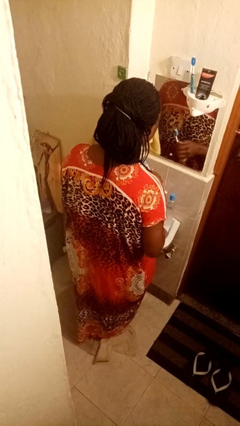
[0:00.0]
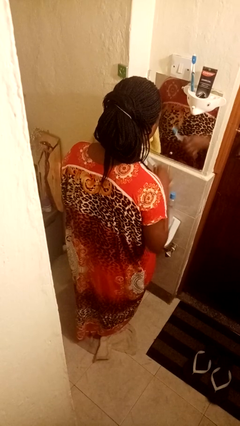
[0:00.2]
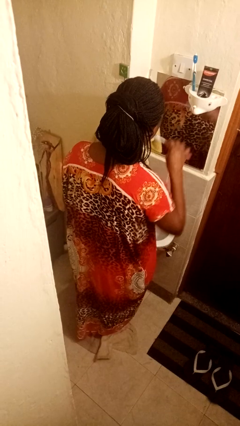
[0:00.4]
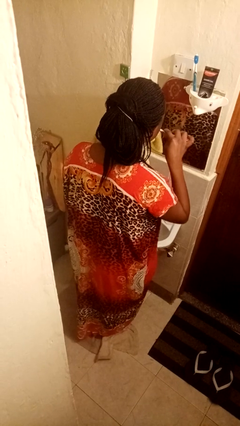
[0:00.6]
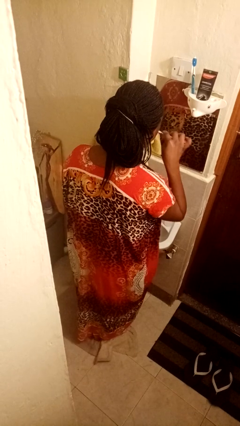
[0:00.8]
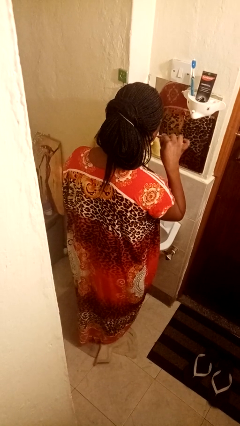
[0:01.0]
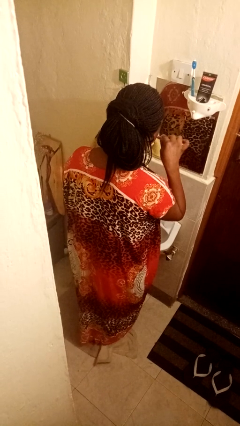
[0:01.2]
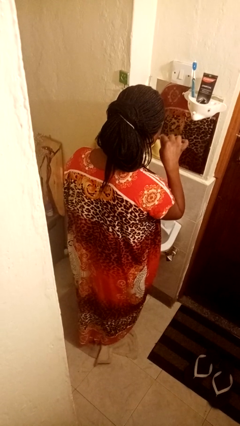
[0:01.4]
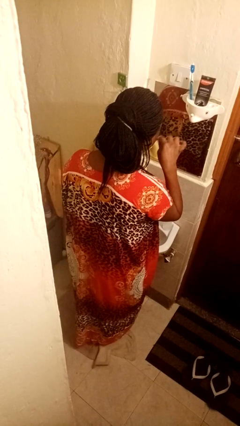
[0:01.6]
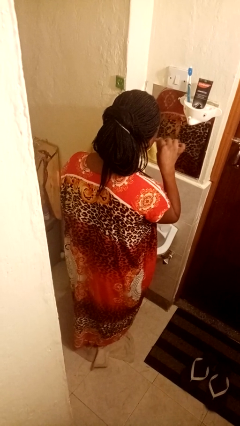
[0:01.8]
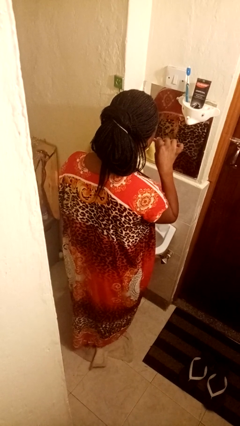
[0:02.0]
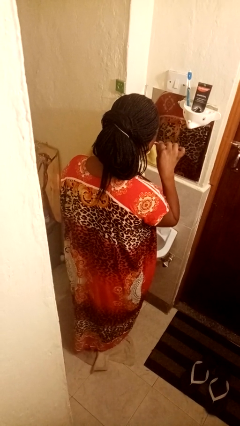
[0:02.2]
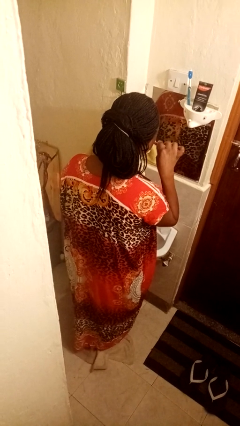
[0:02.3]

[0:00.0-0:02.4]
person brushes teeth

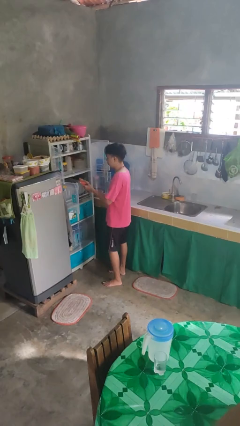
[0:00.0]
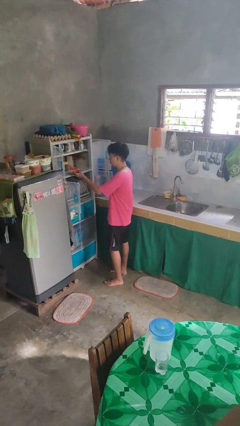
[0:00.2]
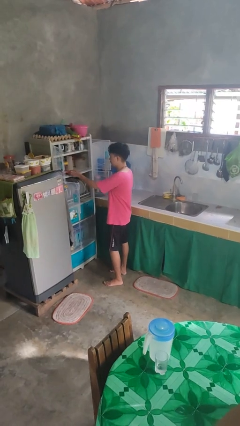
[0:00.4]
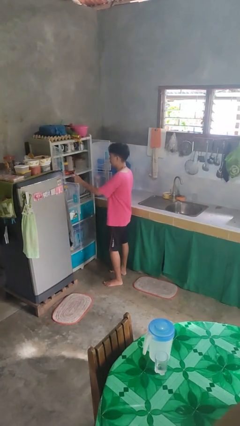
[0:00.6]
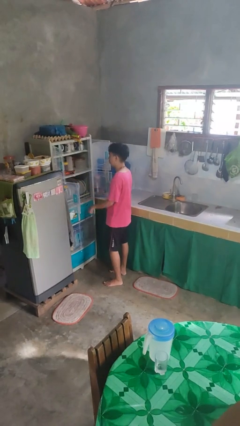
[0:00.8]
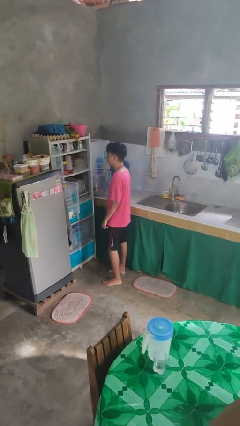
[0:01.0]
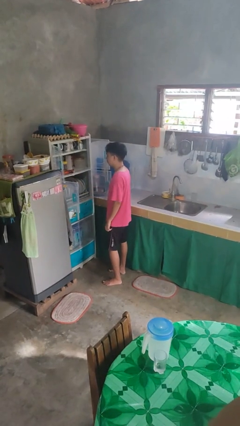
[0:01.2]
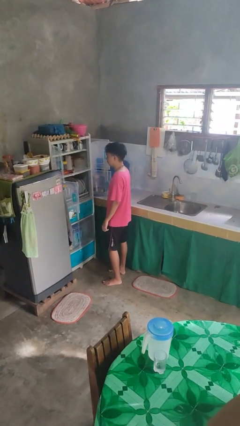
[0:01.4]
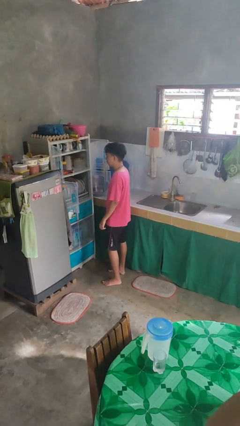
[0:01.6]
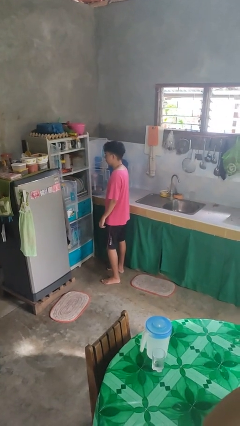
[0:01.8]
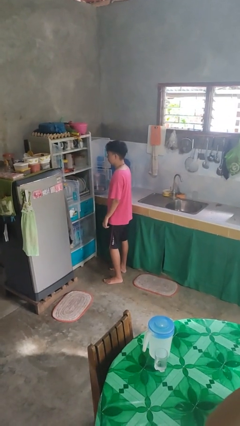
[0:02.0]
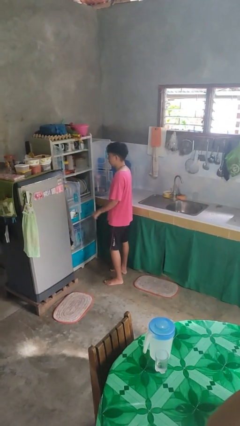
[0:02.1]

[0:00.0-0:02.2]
person puts object in cabinet

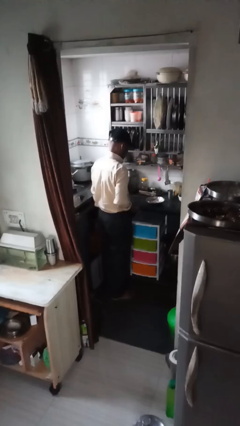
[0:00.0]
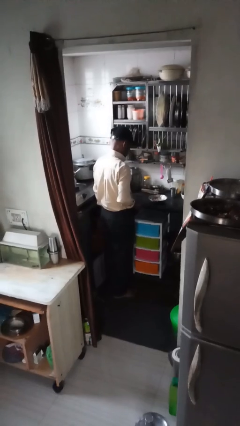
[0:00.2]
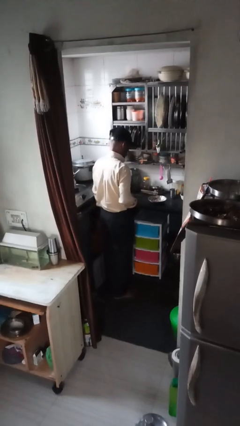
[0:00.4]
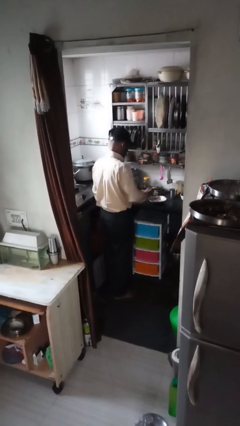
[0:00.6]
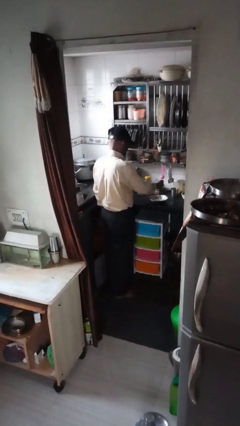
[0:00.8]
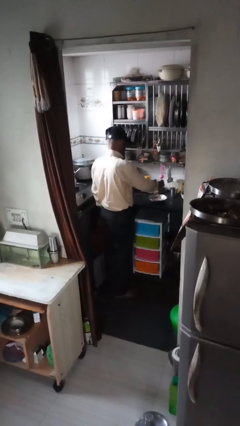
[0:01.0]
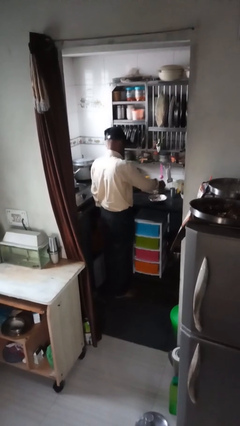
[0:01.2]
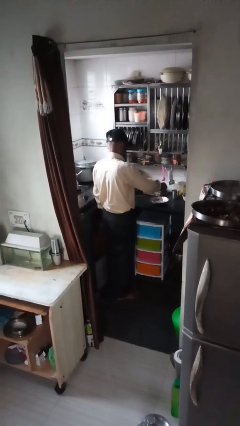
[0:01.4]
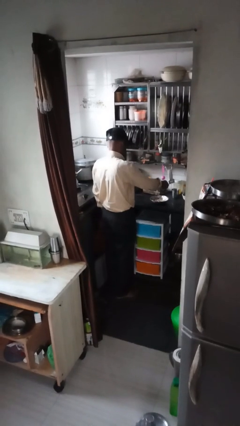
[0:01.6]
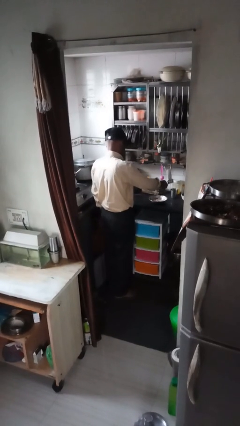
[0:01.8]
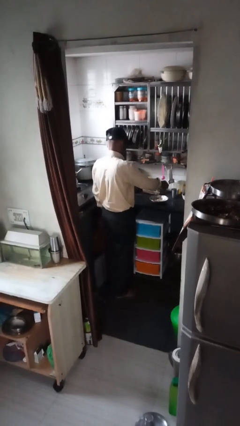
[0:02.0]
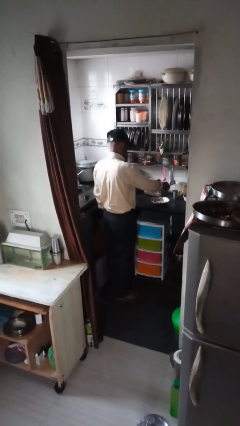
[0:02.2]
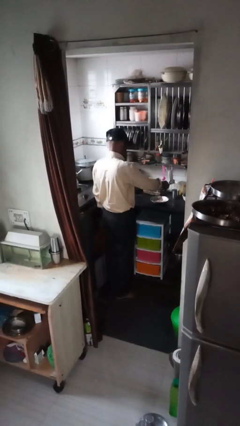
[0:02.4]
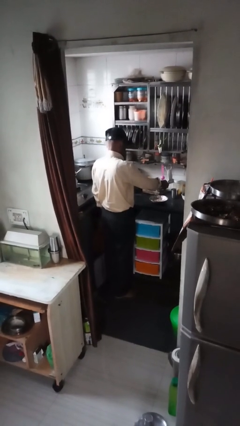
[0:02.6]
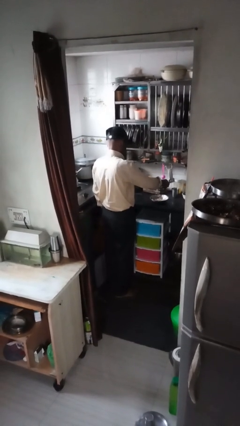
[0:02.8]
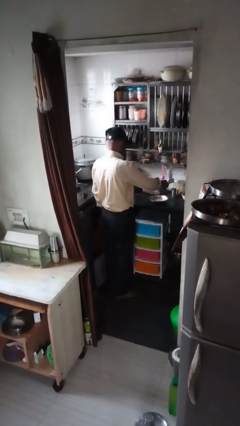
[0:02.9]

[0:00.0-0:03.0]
person pours into bowl

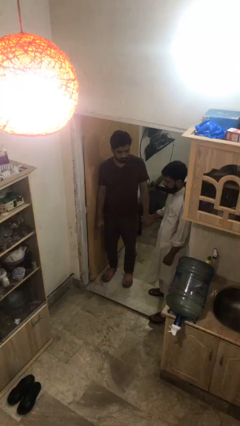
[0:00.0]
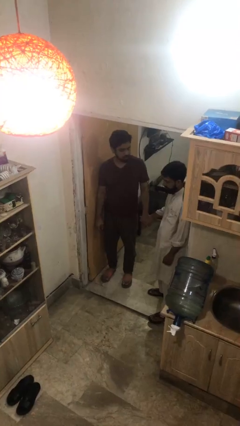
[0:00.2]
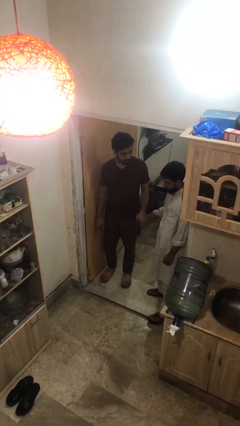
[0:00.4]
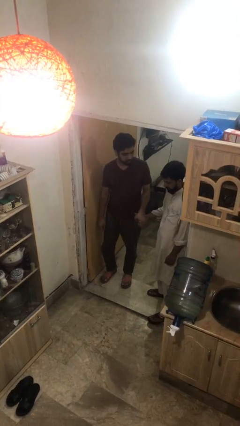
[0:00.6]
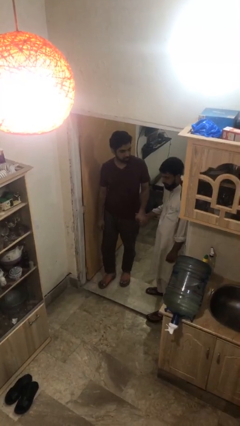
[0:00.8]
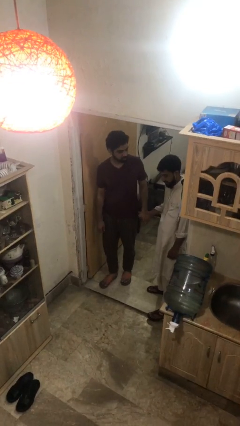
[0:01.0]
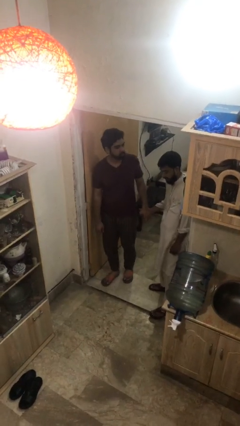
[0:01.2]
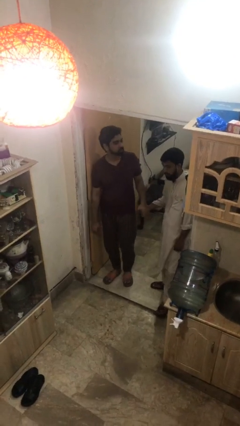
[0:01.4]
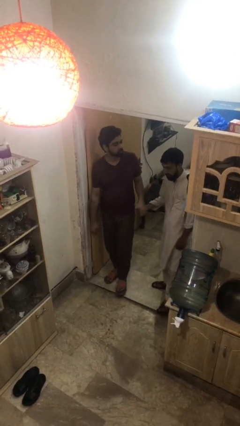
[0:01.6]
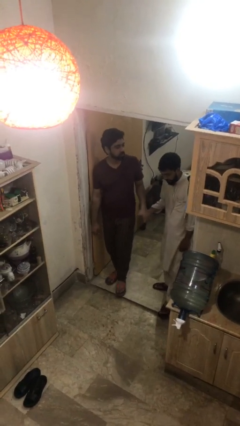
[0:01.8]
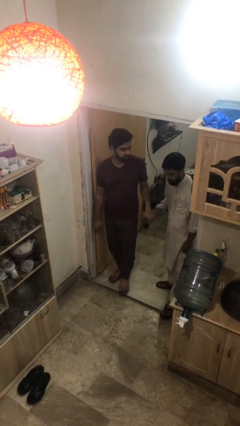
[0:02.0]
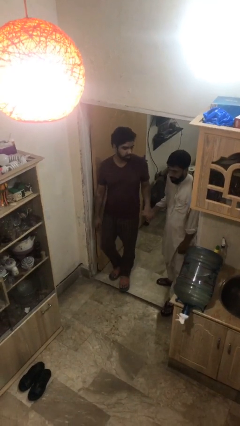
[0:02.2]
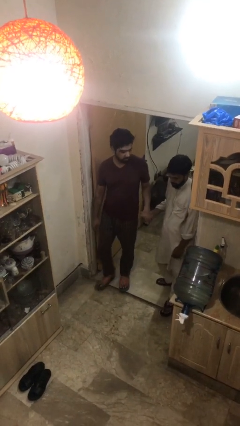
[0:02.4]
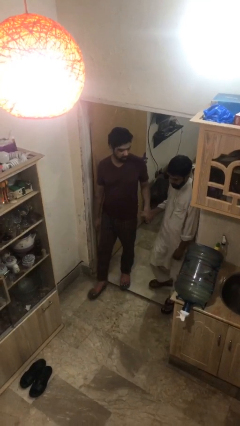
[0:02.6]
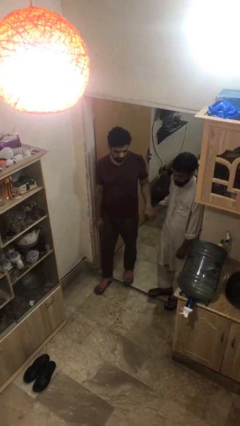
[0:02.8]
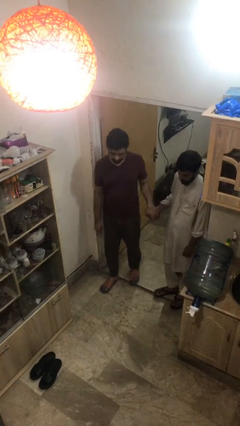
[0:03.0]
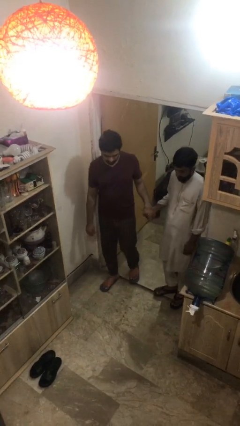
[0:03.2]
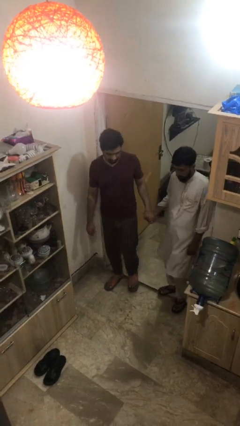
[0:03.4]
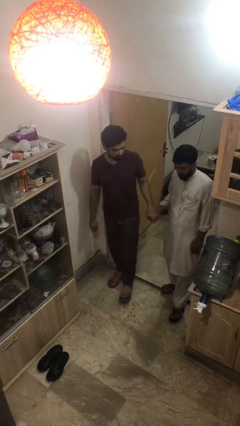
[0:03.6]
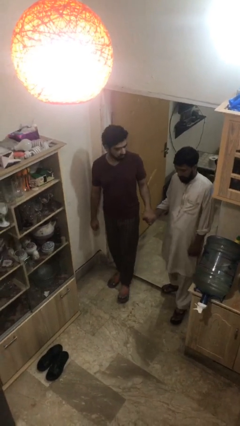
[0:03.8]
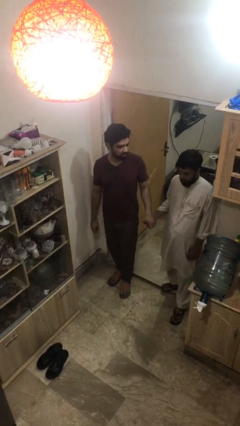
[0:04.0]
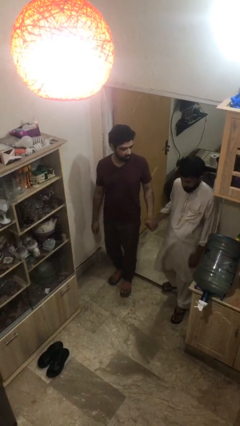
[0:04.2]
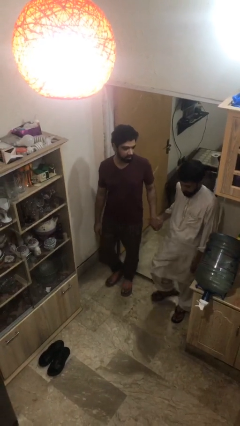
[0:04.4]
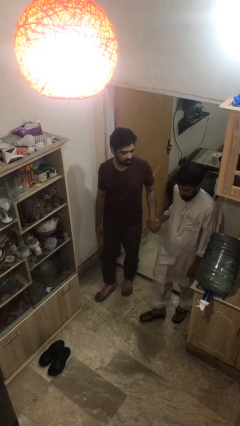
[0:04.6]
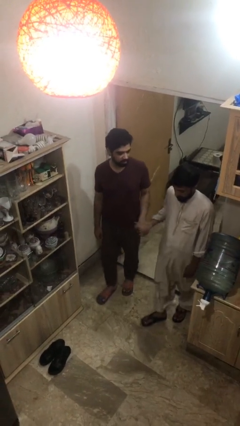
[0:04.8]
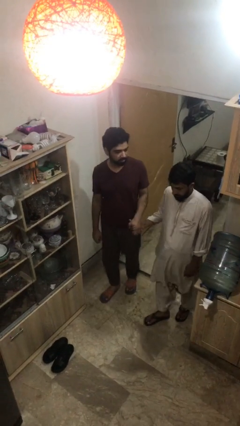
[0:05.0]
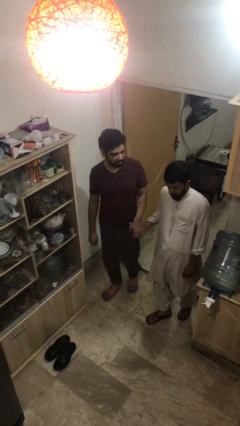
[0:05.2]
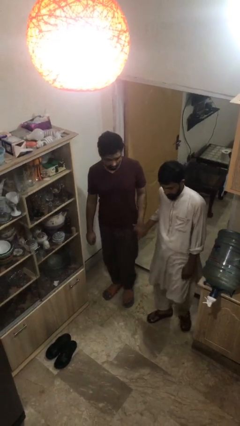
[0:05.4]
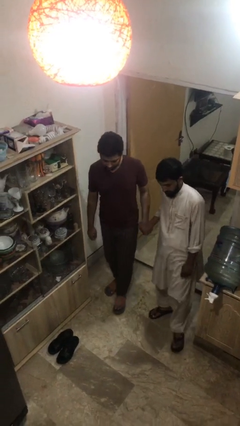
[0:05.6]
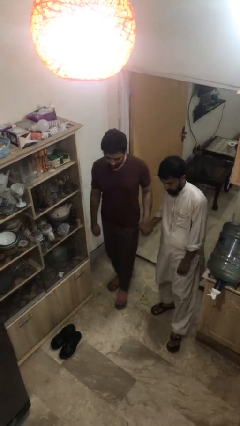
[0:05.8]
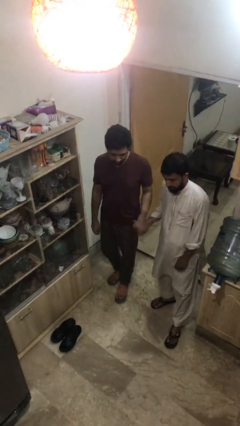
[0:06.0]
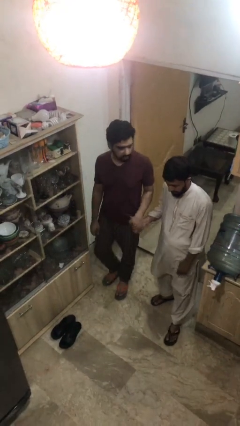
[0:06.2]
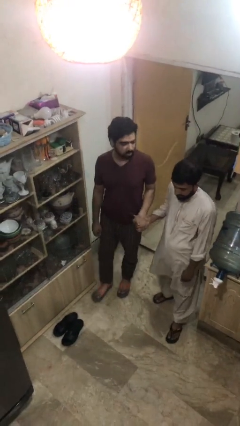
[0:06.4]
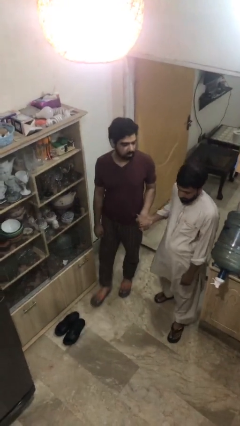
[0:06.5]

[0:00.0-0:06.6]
person holds hand

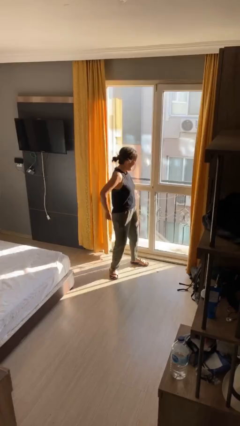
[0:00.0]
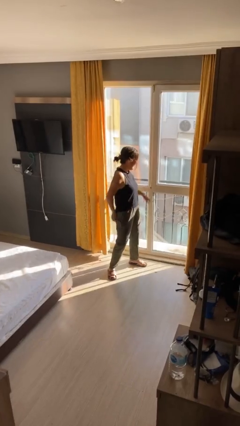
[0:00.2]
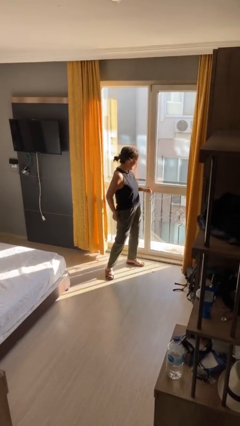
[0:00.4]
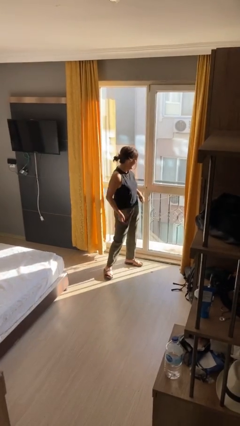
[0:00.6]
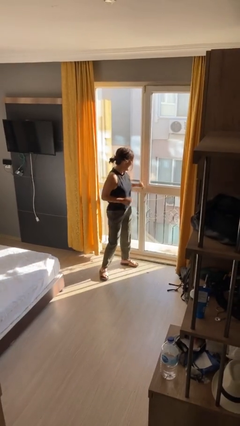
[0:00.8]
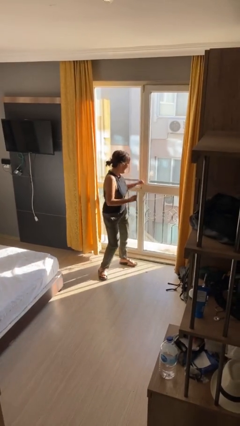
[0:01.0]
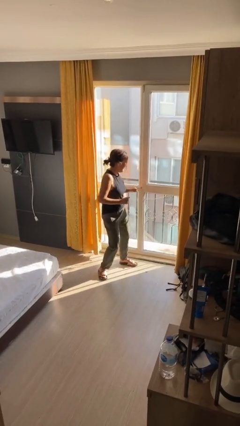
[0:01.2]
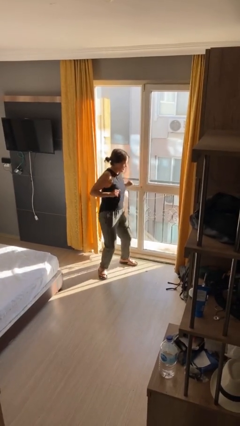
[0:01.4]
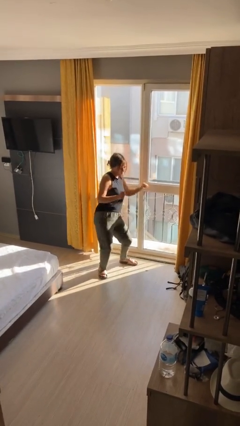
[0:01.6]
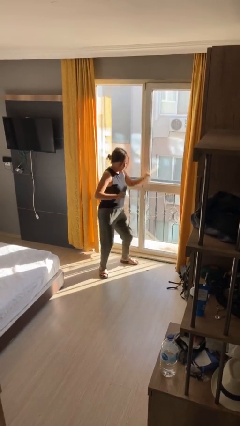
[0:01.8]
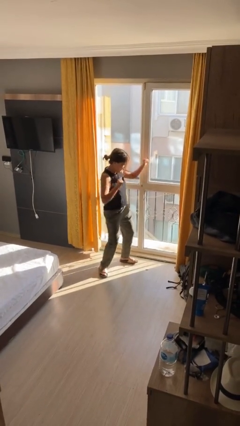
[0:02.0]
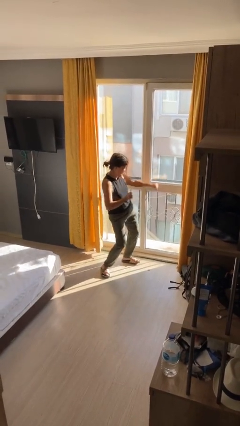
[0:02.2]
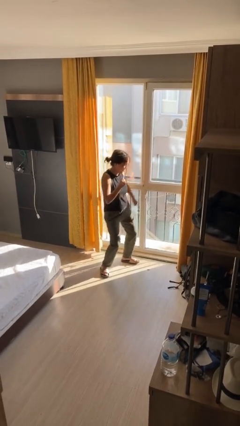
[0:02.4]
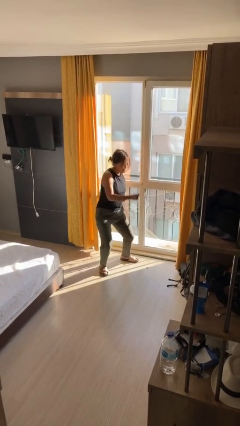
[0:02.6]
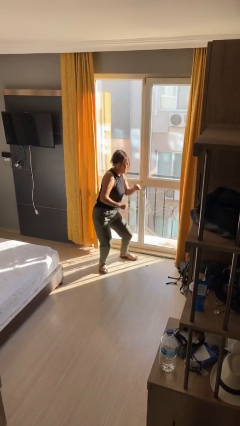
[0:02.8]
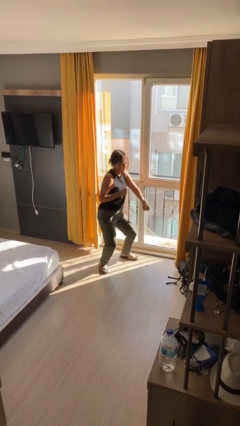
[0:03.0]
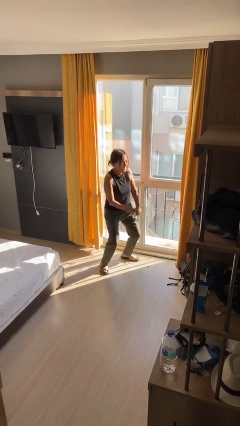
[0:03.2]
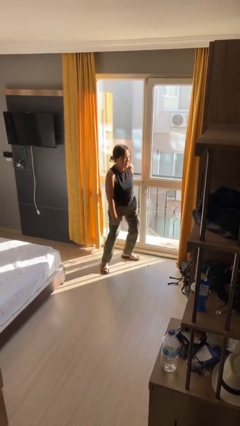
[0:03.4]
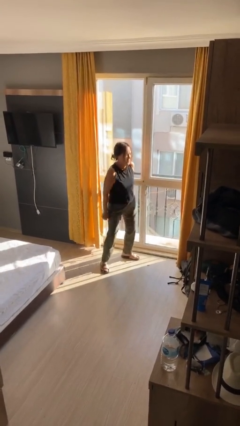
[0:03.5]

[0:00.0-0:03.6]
person dances in place
